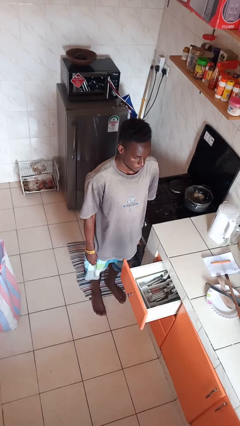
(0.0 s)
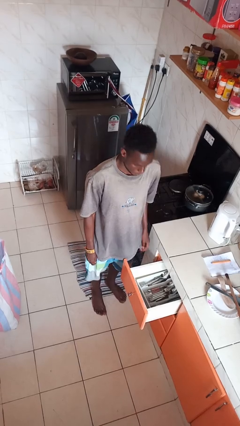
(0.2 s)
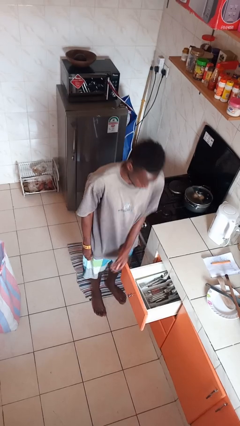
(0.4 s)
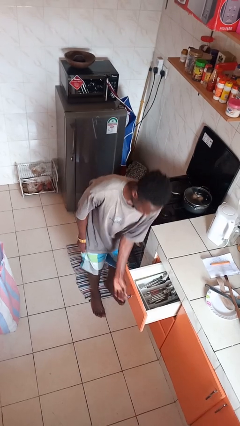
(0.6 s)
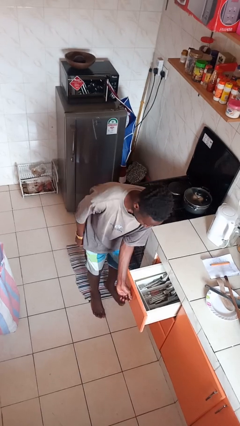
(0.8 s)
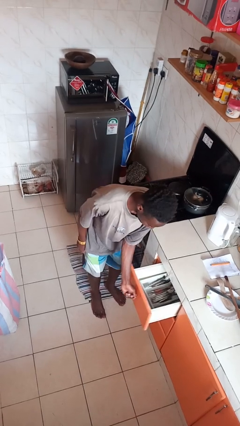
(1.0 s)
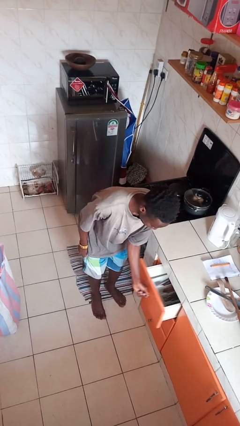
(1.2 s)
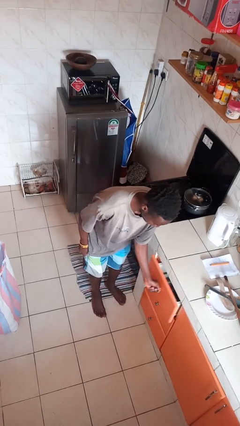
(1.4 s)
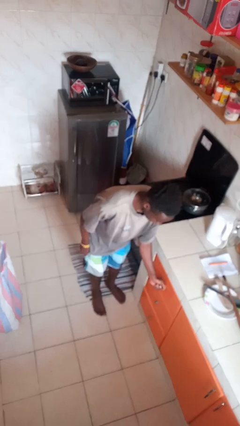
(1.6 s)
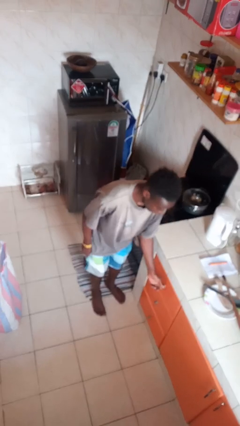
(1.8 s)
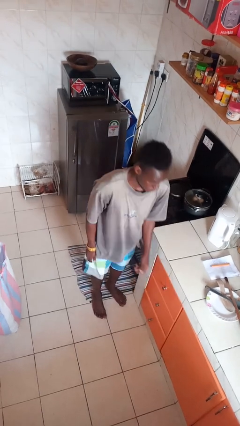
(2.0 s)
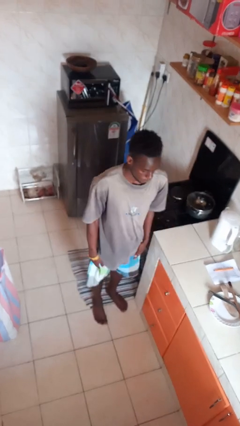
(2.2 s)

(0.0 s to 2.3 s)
person closes kitchen drawer

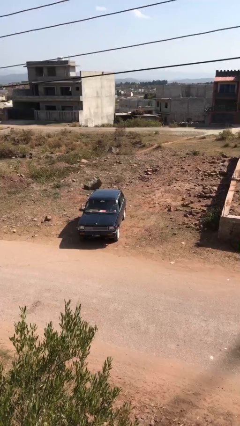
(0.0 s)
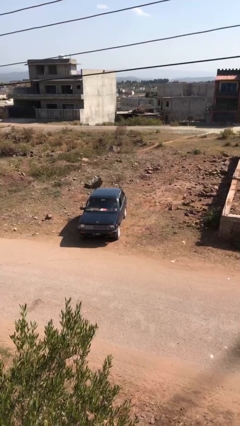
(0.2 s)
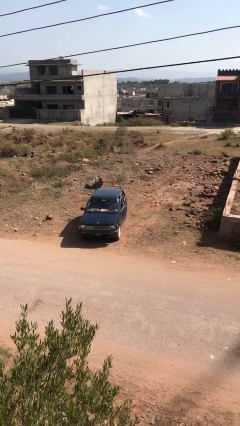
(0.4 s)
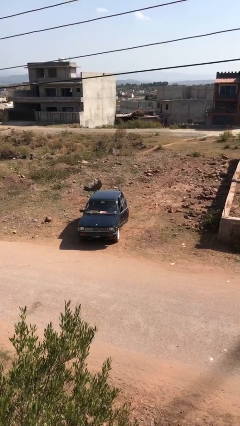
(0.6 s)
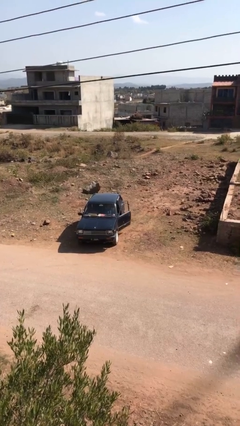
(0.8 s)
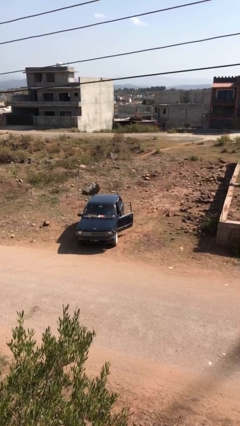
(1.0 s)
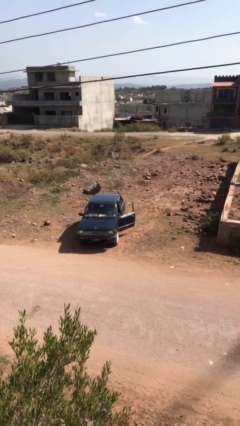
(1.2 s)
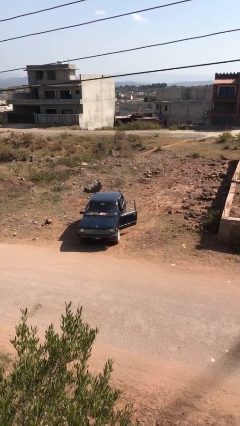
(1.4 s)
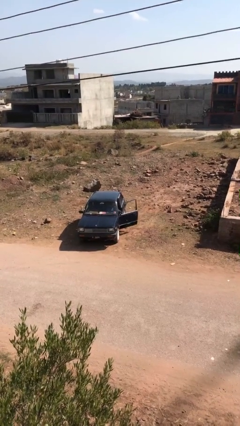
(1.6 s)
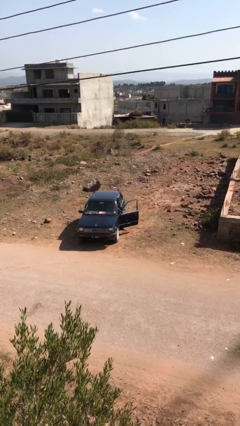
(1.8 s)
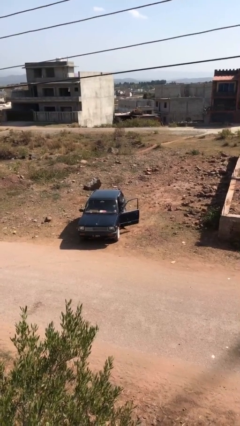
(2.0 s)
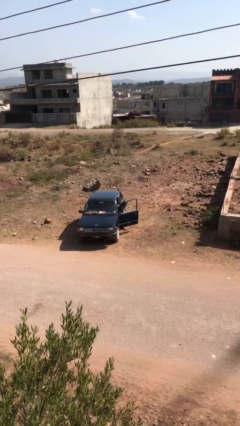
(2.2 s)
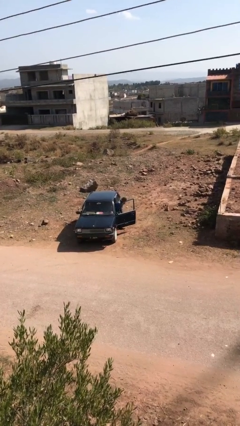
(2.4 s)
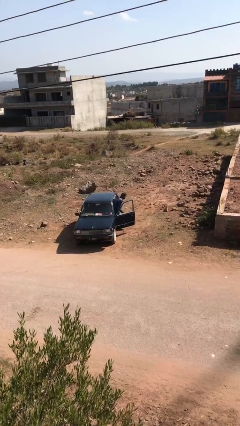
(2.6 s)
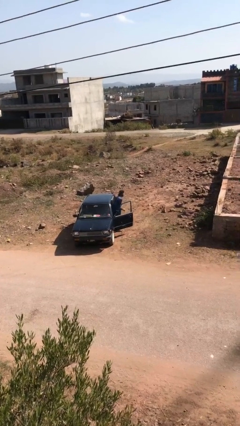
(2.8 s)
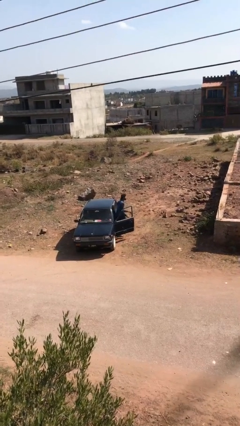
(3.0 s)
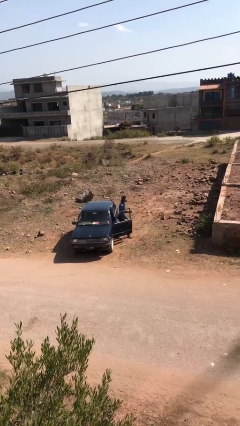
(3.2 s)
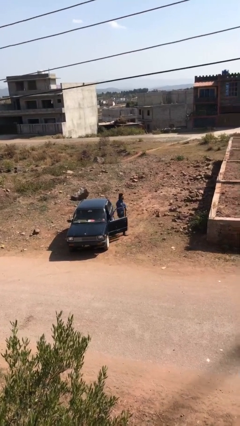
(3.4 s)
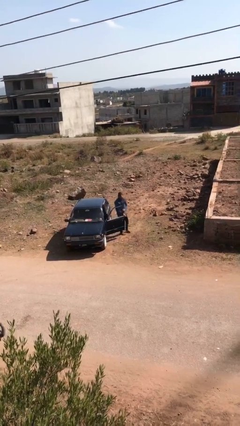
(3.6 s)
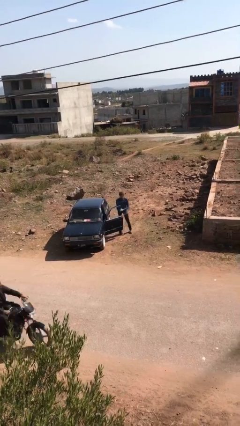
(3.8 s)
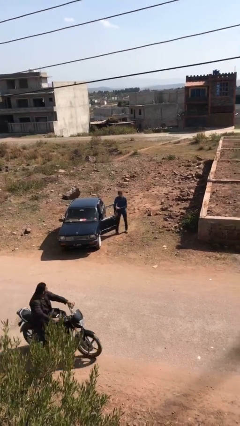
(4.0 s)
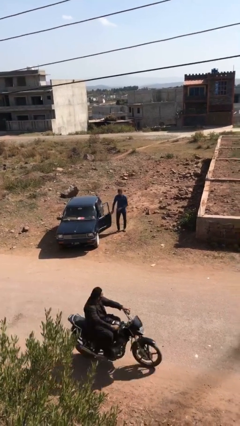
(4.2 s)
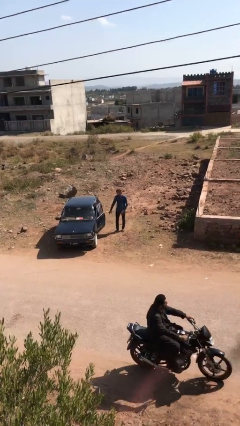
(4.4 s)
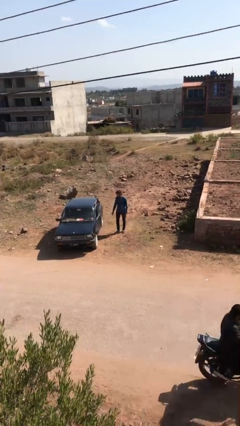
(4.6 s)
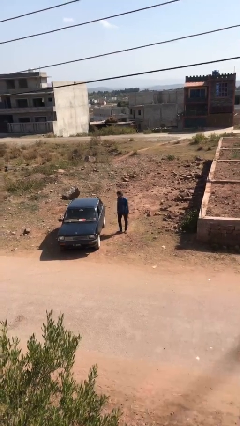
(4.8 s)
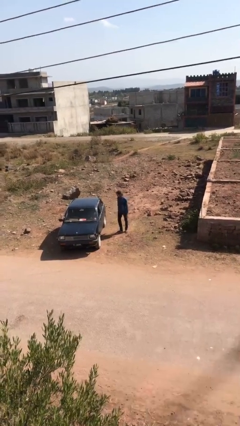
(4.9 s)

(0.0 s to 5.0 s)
car drops off person

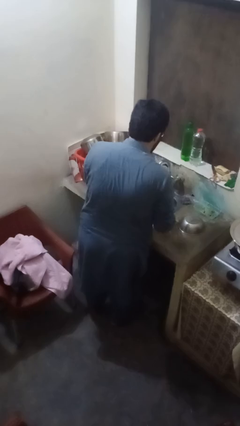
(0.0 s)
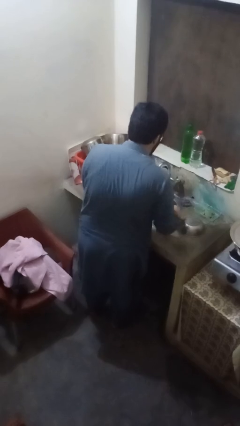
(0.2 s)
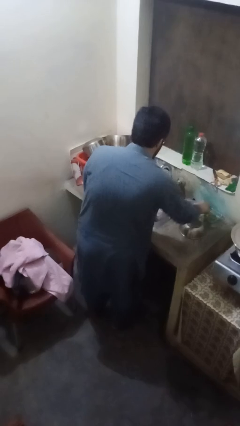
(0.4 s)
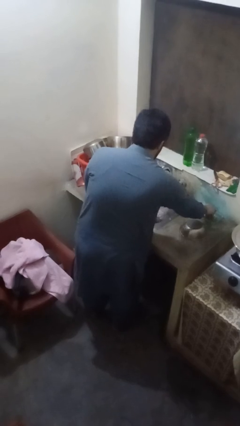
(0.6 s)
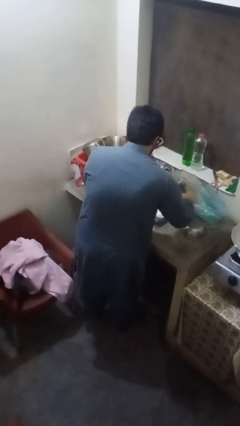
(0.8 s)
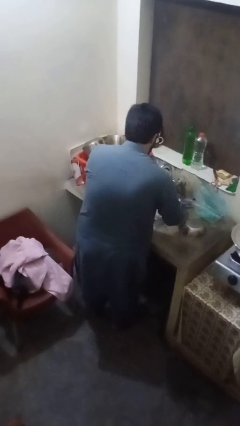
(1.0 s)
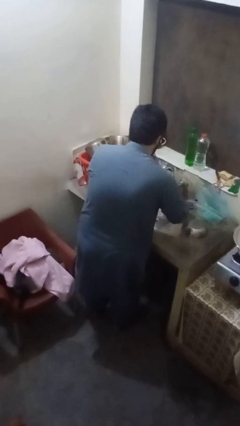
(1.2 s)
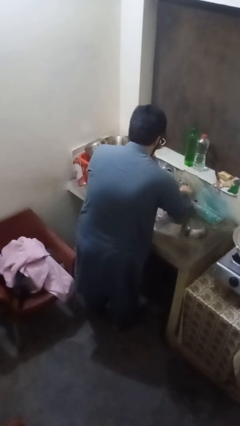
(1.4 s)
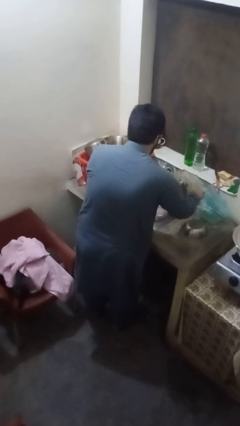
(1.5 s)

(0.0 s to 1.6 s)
person washes dish

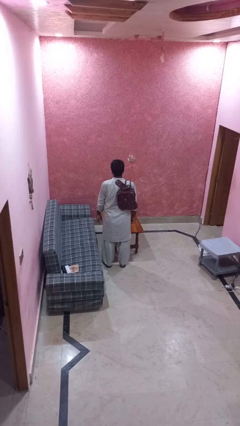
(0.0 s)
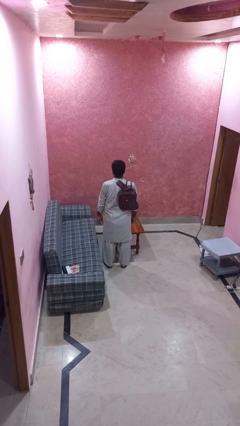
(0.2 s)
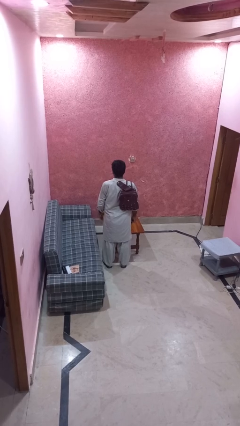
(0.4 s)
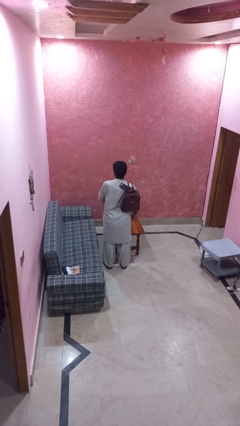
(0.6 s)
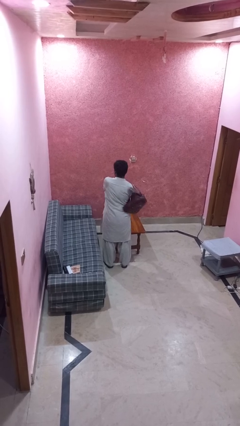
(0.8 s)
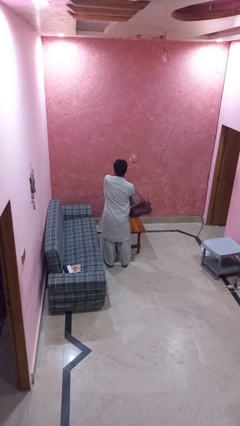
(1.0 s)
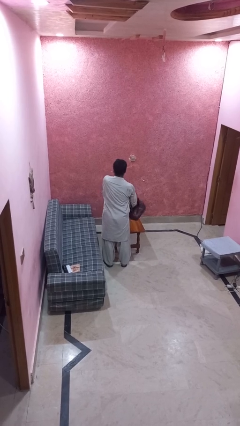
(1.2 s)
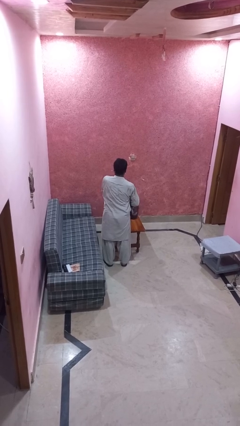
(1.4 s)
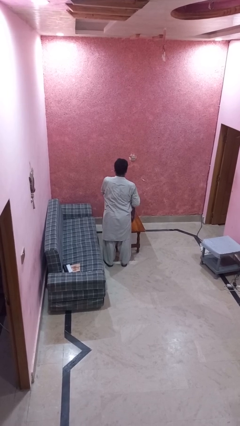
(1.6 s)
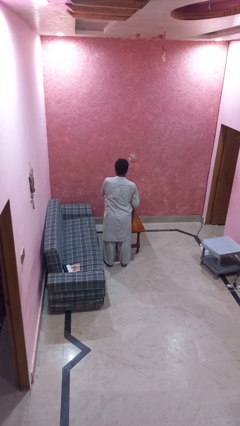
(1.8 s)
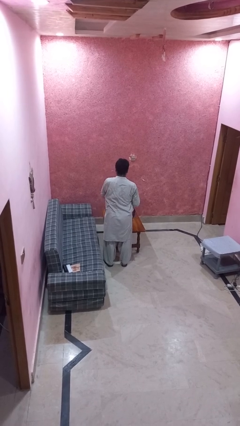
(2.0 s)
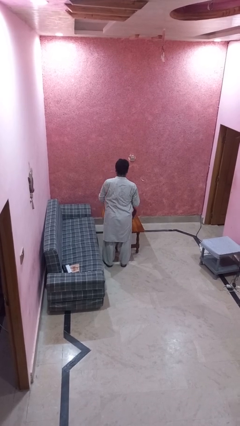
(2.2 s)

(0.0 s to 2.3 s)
person takes off backpack

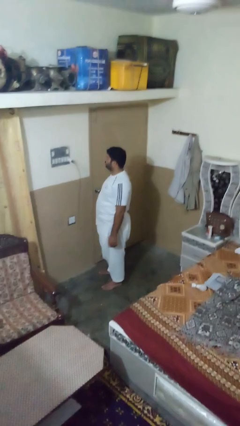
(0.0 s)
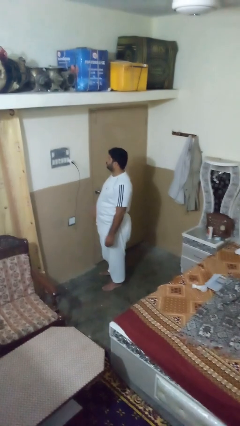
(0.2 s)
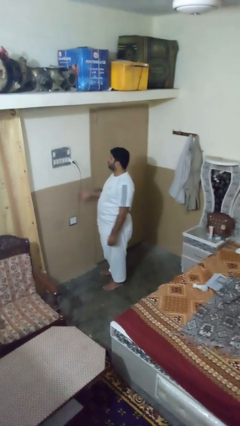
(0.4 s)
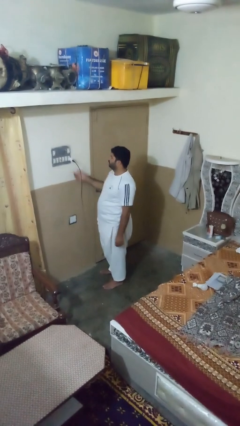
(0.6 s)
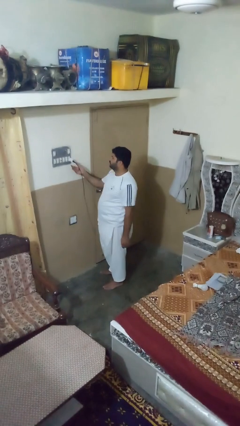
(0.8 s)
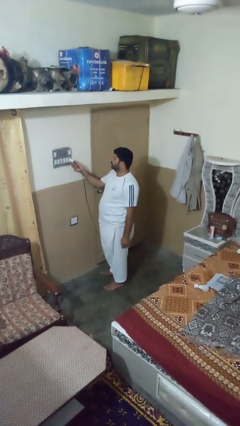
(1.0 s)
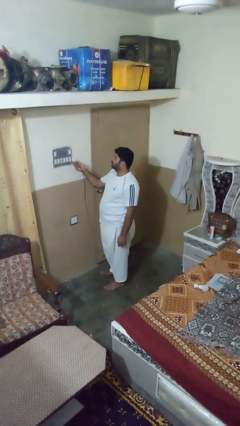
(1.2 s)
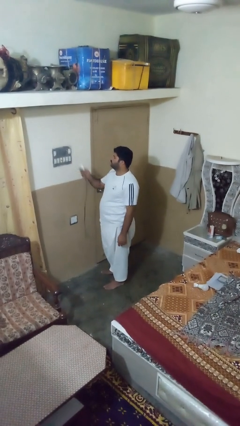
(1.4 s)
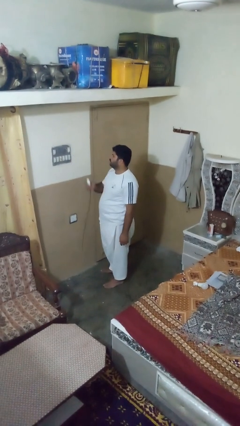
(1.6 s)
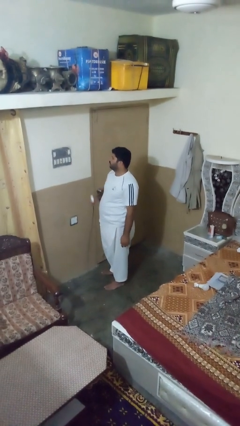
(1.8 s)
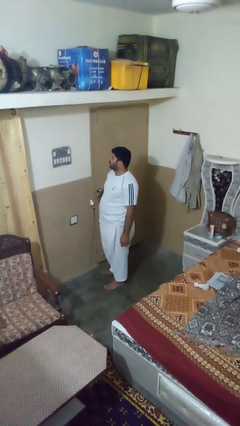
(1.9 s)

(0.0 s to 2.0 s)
person unplugs from electrical socket

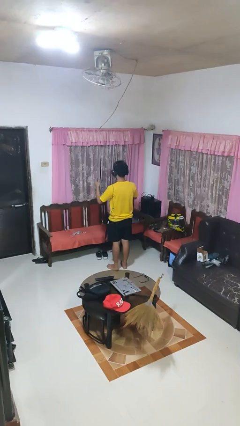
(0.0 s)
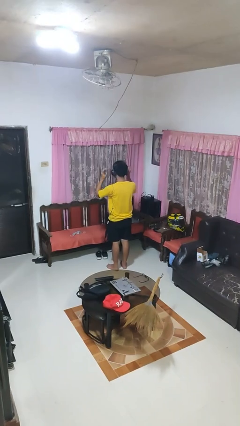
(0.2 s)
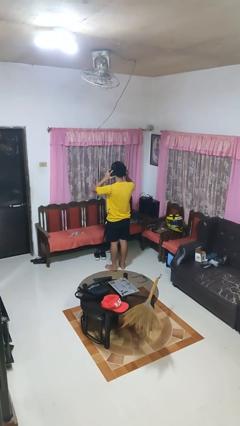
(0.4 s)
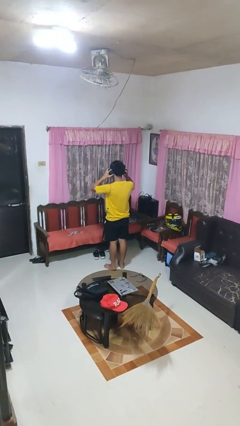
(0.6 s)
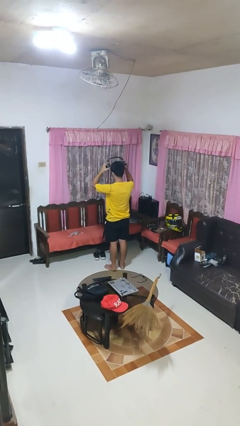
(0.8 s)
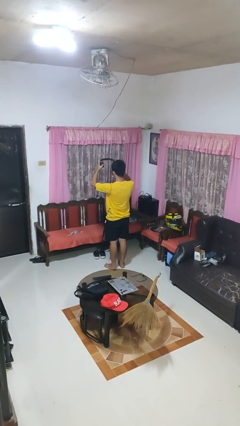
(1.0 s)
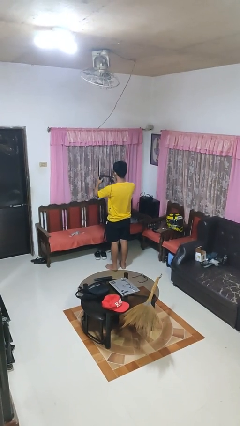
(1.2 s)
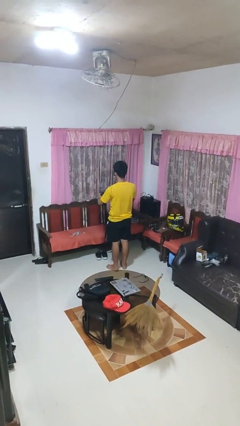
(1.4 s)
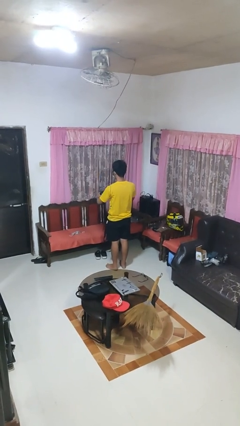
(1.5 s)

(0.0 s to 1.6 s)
person takes off headphones

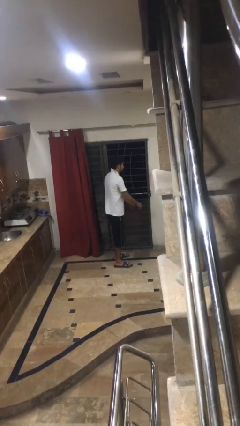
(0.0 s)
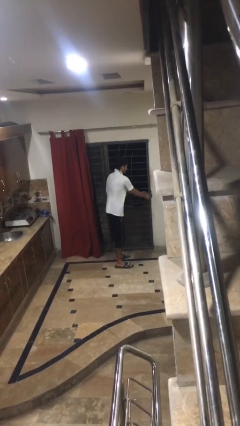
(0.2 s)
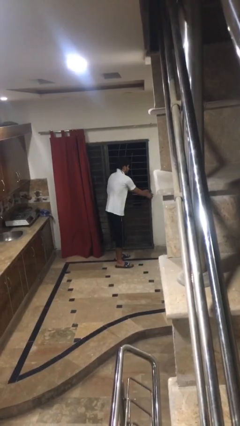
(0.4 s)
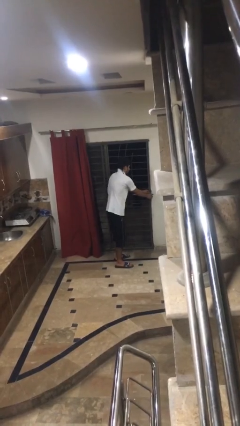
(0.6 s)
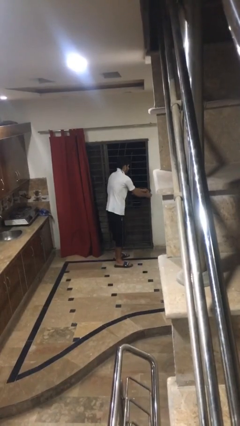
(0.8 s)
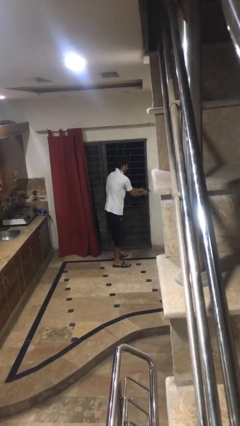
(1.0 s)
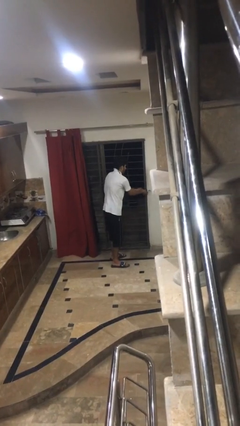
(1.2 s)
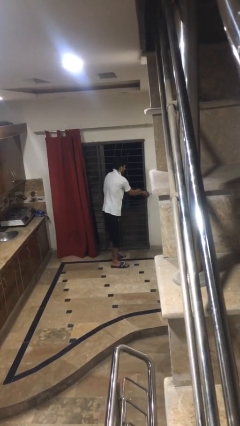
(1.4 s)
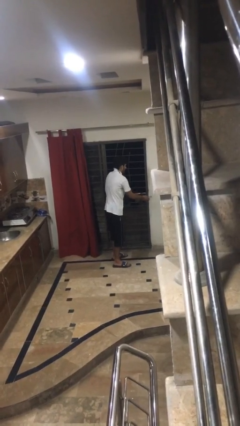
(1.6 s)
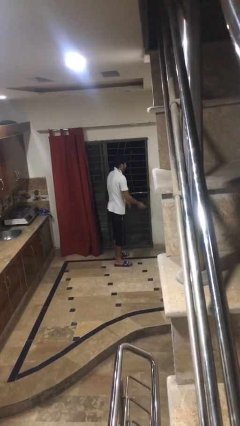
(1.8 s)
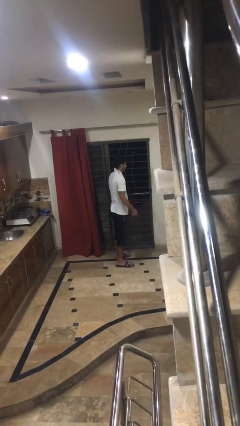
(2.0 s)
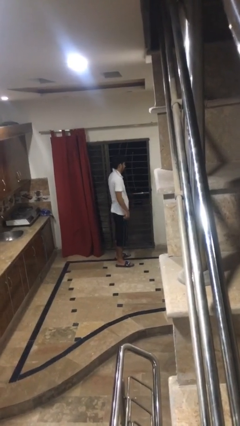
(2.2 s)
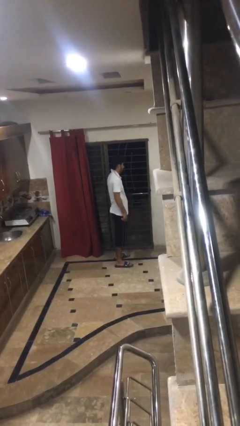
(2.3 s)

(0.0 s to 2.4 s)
person unlocks door with keys
